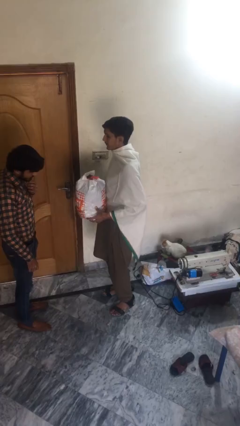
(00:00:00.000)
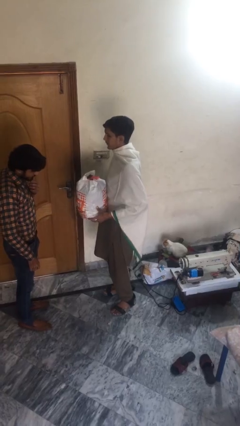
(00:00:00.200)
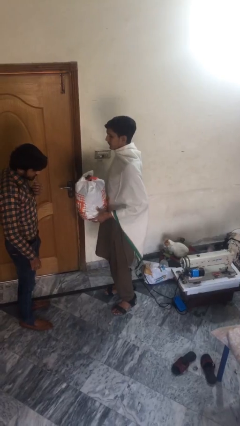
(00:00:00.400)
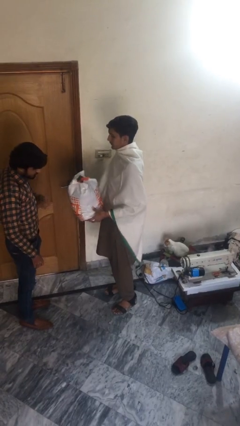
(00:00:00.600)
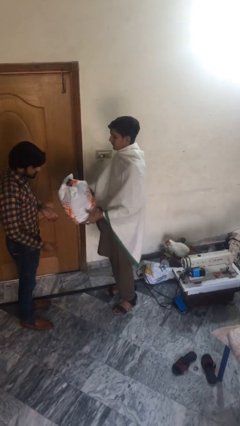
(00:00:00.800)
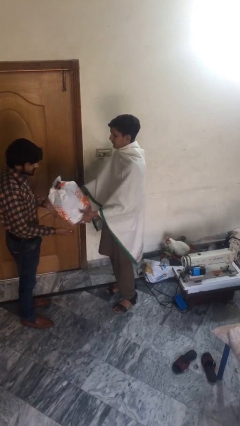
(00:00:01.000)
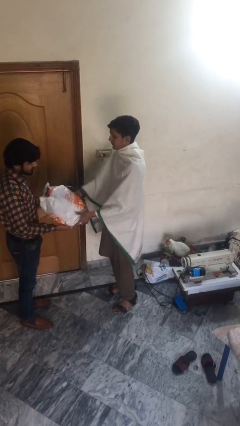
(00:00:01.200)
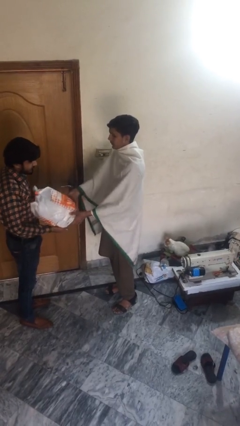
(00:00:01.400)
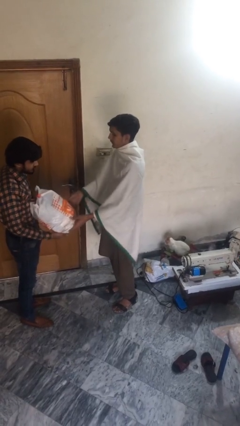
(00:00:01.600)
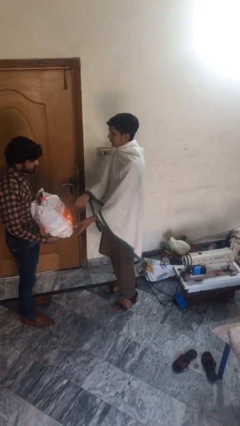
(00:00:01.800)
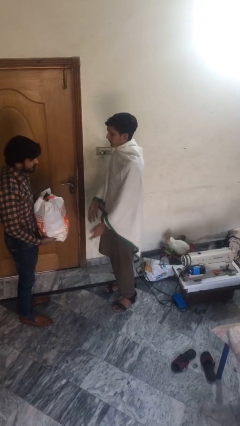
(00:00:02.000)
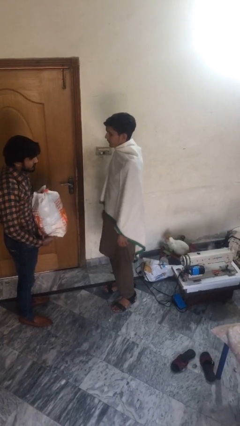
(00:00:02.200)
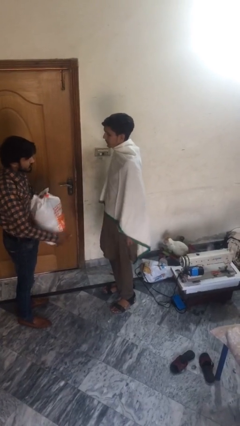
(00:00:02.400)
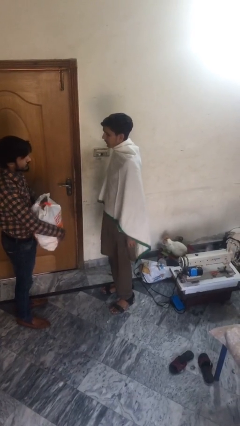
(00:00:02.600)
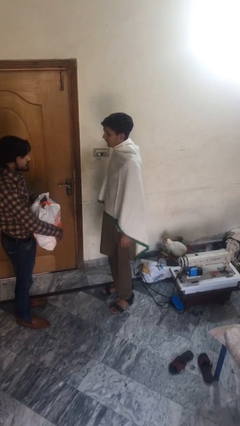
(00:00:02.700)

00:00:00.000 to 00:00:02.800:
person transfers object to person

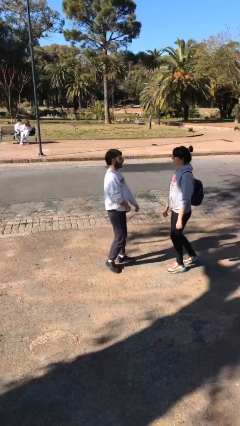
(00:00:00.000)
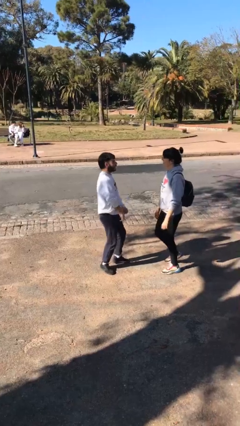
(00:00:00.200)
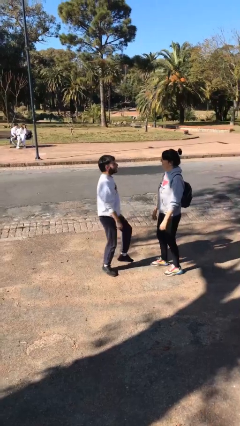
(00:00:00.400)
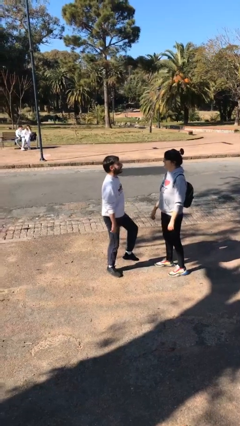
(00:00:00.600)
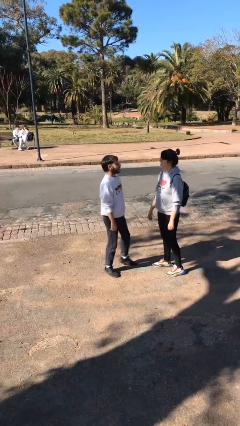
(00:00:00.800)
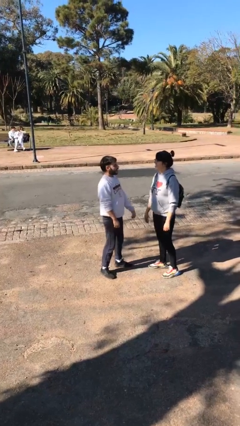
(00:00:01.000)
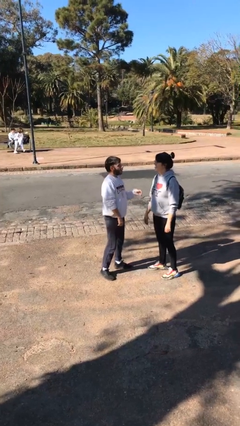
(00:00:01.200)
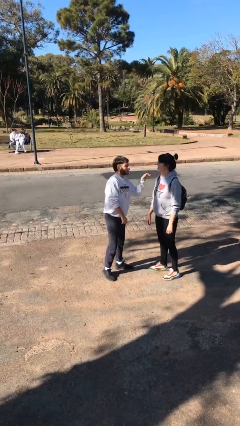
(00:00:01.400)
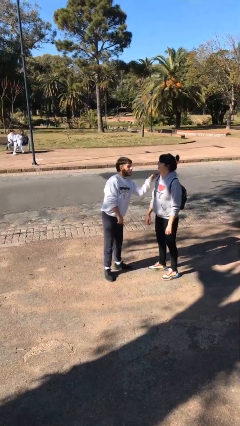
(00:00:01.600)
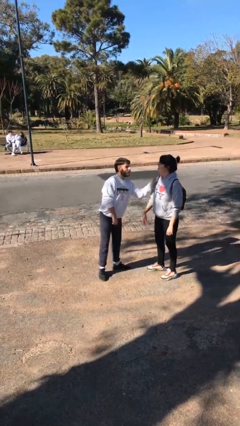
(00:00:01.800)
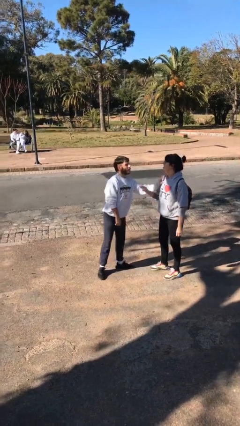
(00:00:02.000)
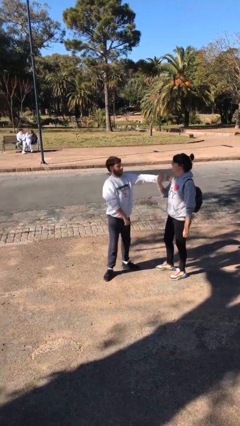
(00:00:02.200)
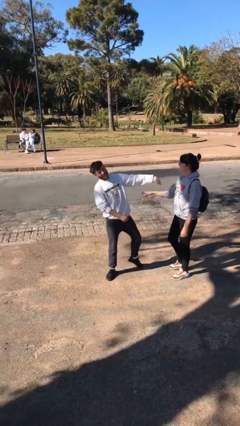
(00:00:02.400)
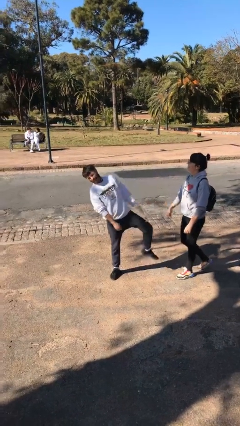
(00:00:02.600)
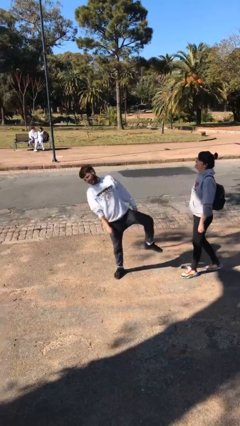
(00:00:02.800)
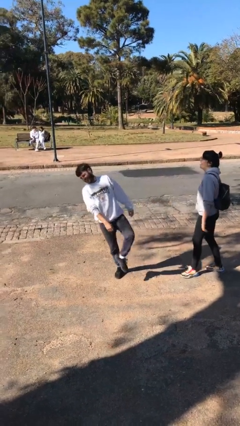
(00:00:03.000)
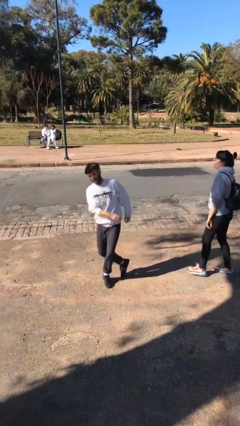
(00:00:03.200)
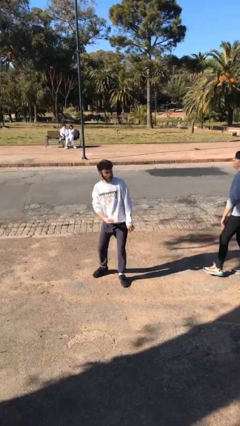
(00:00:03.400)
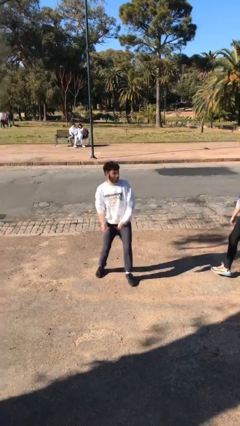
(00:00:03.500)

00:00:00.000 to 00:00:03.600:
person shoves person

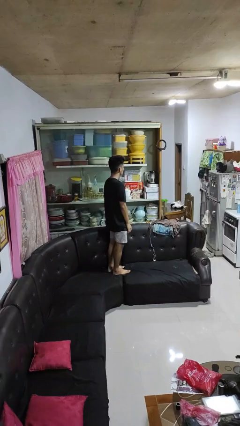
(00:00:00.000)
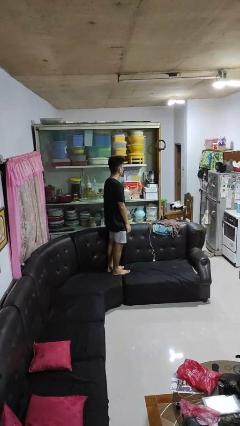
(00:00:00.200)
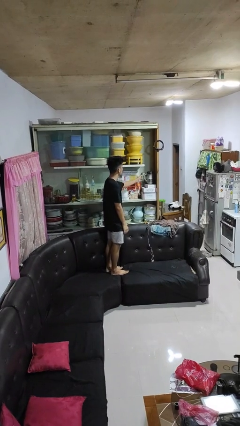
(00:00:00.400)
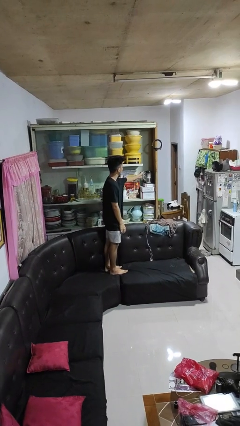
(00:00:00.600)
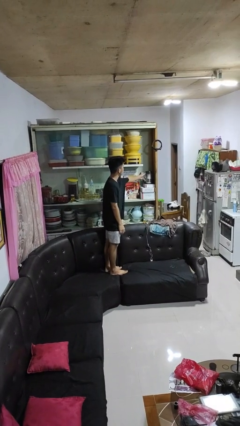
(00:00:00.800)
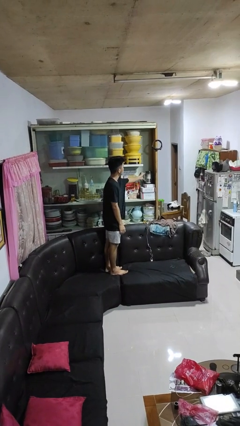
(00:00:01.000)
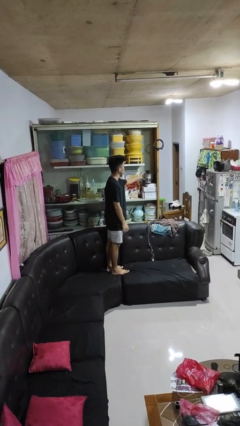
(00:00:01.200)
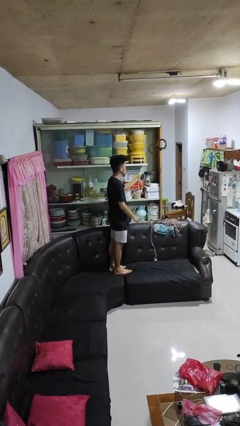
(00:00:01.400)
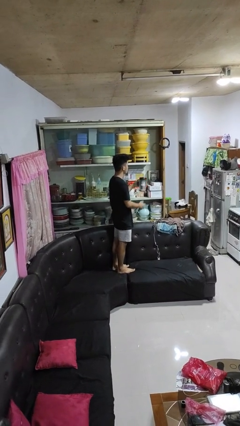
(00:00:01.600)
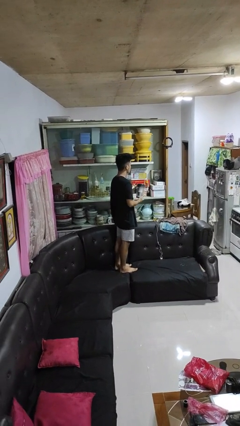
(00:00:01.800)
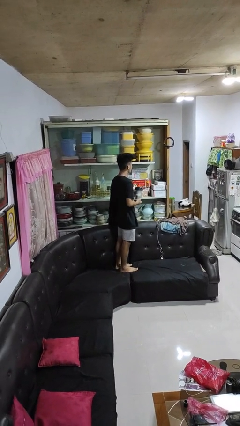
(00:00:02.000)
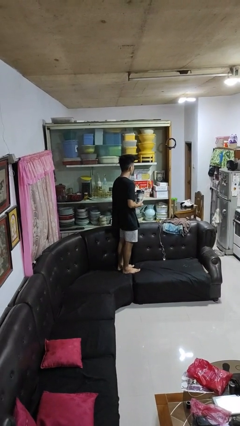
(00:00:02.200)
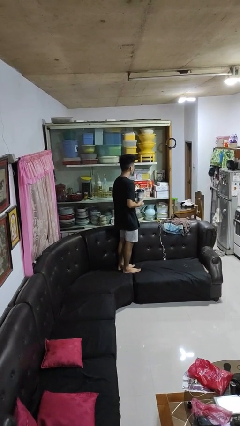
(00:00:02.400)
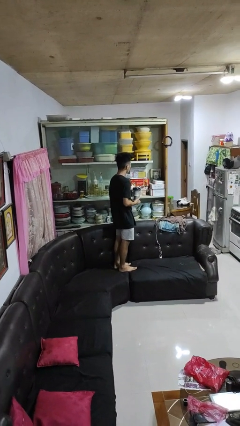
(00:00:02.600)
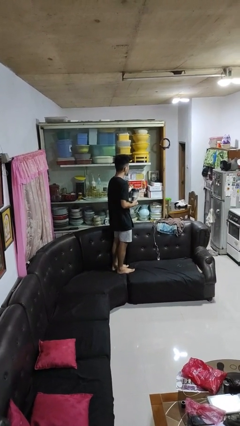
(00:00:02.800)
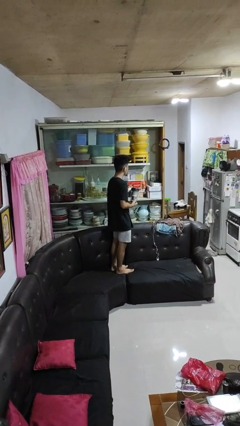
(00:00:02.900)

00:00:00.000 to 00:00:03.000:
person picks up object from cabinet

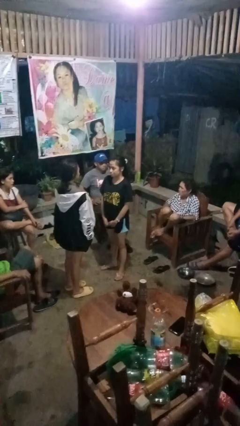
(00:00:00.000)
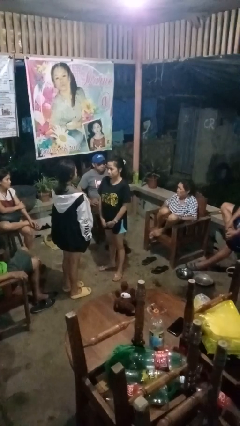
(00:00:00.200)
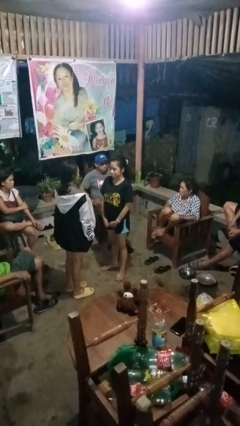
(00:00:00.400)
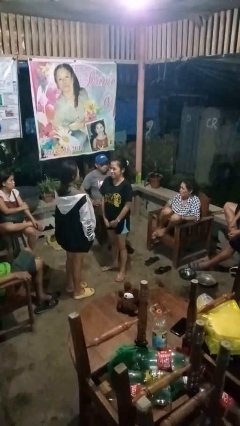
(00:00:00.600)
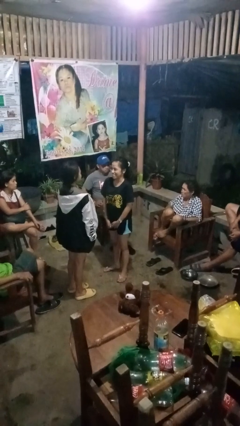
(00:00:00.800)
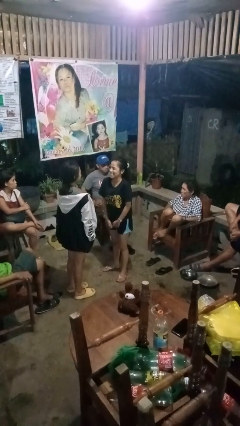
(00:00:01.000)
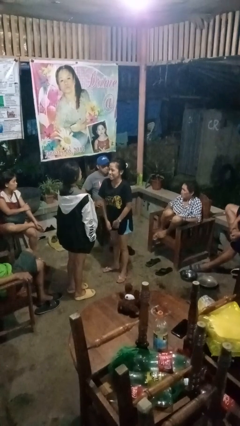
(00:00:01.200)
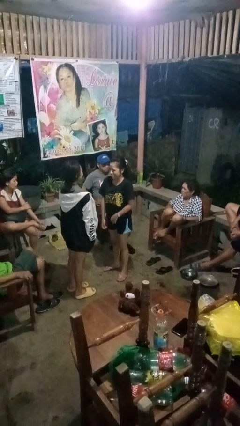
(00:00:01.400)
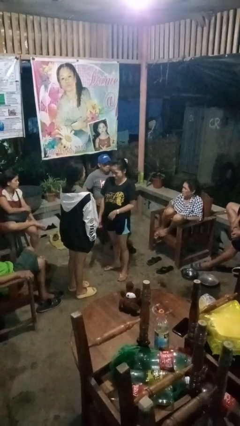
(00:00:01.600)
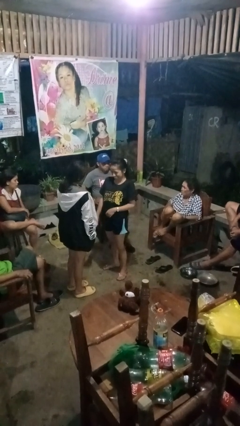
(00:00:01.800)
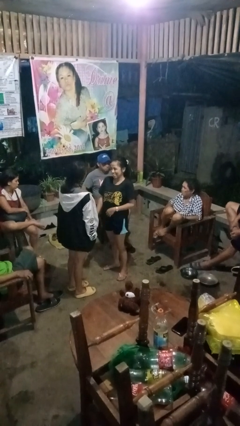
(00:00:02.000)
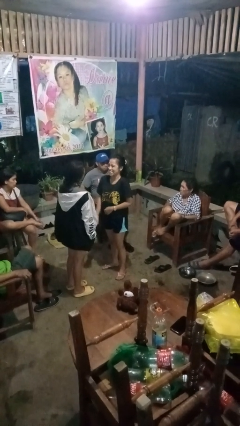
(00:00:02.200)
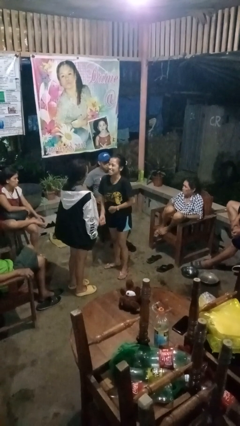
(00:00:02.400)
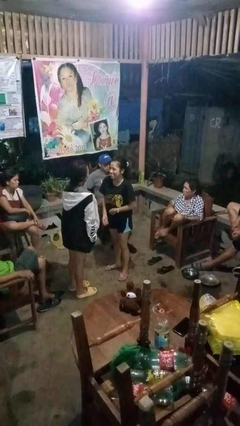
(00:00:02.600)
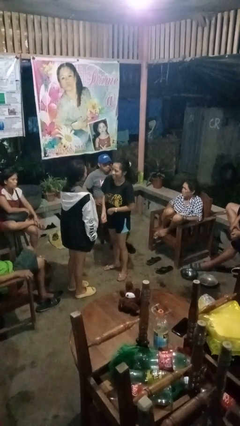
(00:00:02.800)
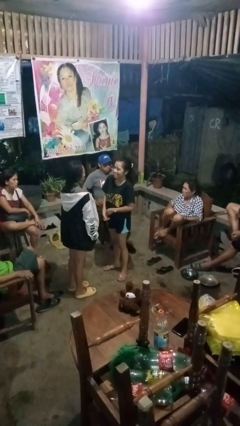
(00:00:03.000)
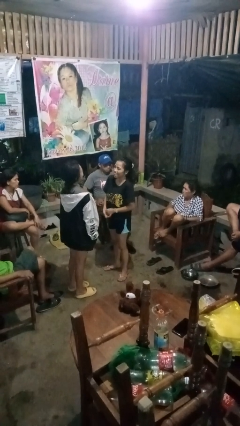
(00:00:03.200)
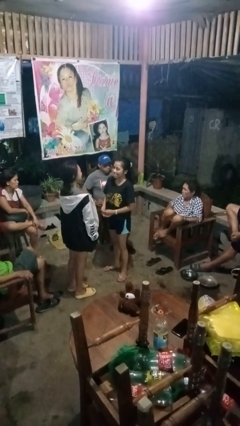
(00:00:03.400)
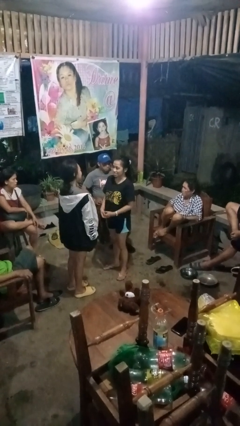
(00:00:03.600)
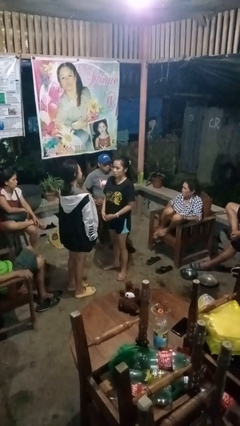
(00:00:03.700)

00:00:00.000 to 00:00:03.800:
person laughs with person

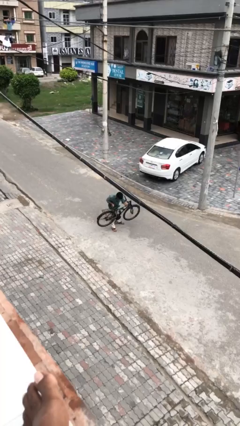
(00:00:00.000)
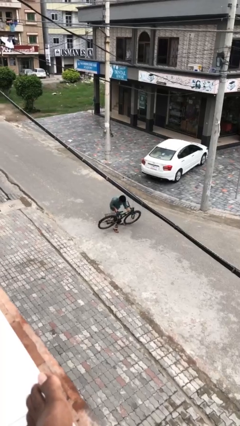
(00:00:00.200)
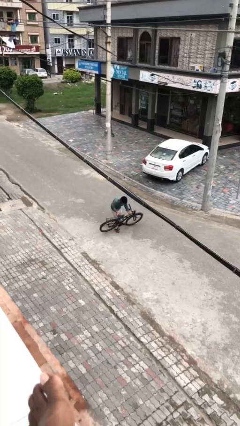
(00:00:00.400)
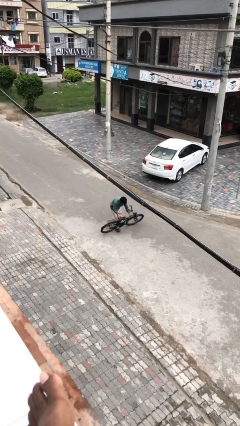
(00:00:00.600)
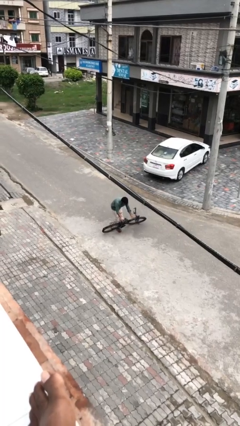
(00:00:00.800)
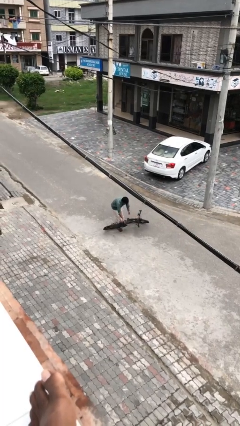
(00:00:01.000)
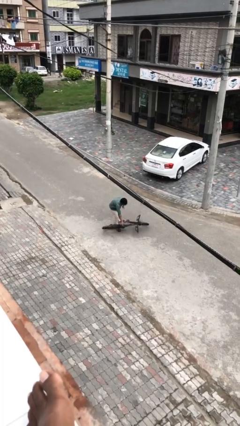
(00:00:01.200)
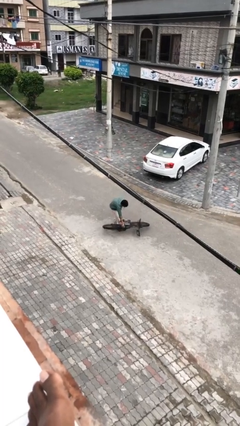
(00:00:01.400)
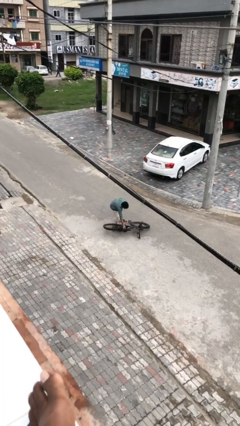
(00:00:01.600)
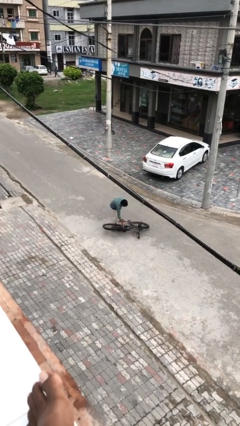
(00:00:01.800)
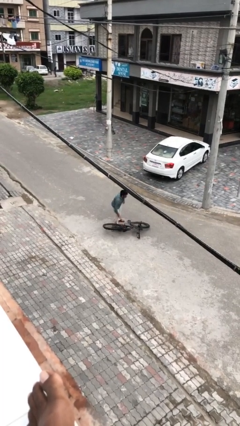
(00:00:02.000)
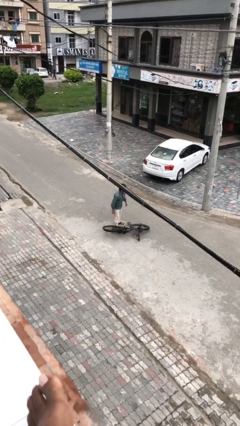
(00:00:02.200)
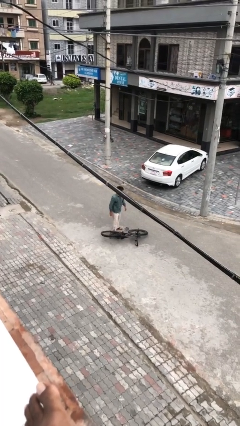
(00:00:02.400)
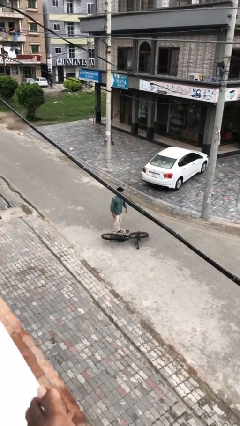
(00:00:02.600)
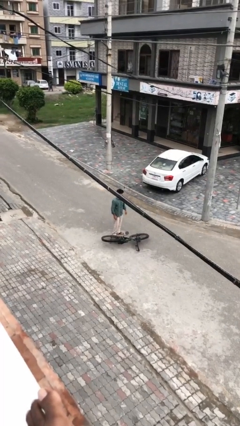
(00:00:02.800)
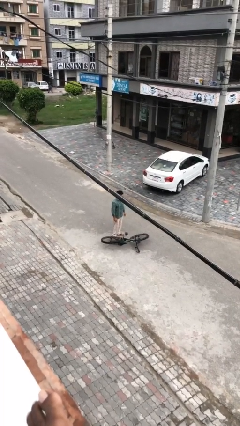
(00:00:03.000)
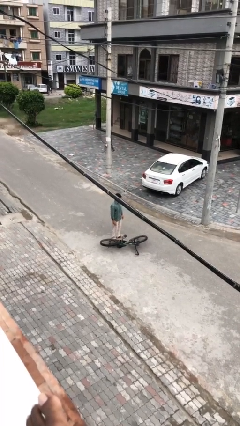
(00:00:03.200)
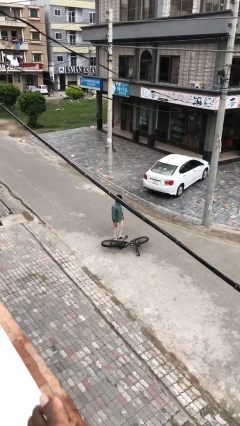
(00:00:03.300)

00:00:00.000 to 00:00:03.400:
person puts down object on floor

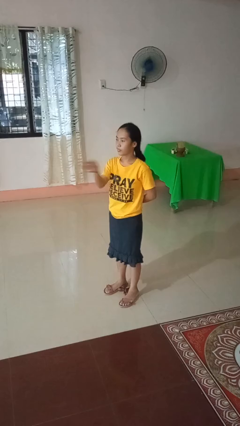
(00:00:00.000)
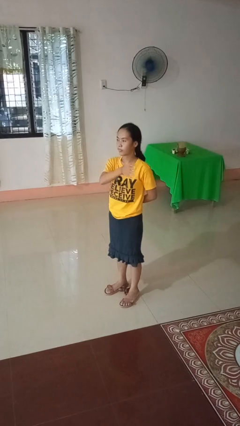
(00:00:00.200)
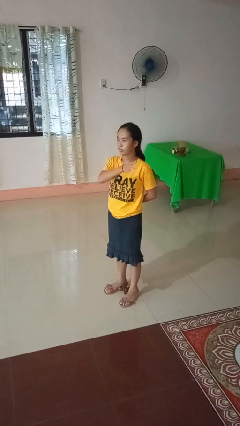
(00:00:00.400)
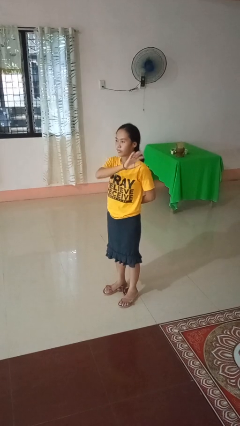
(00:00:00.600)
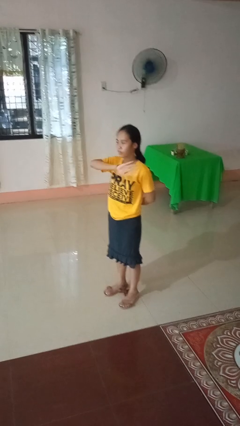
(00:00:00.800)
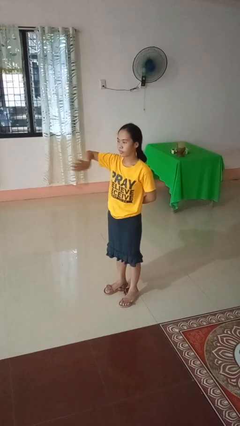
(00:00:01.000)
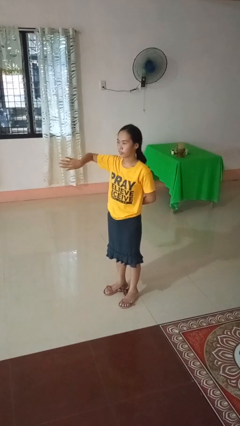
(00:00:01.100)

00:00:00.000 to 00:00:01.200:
person gestures swipe left
